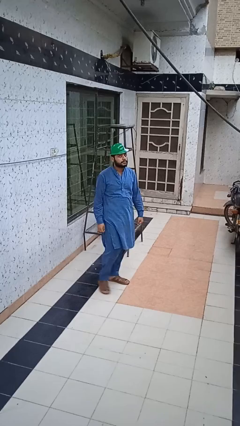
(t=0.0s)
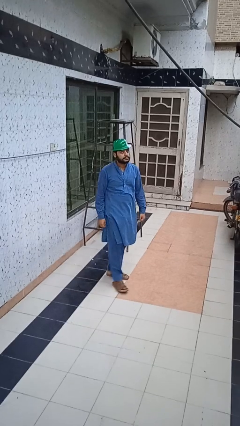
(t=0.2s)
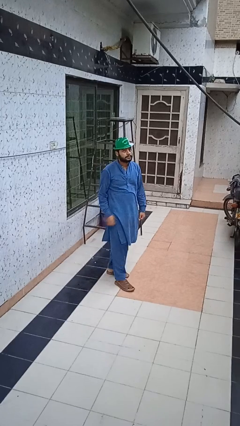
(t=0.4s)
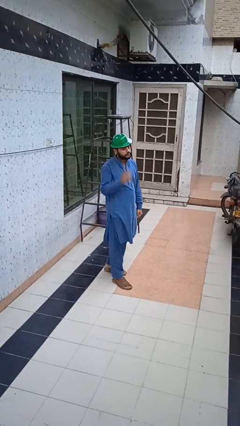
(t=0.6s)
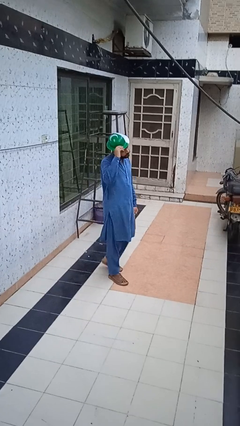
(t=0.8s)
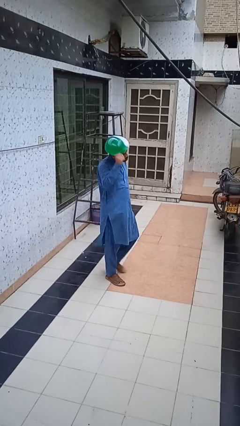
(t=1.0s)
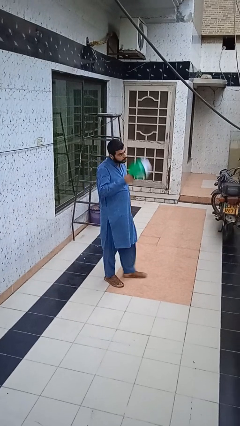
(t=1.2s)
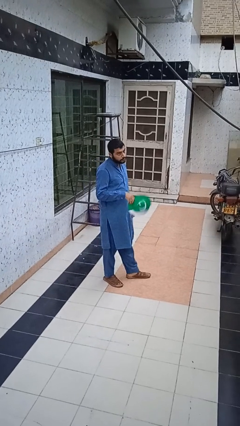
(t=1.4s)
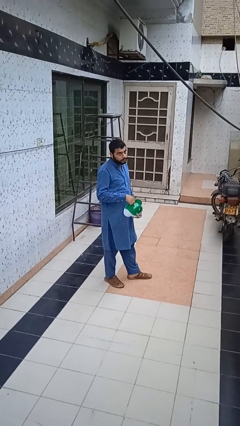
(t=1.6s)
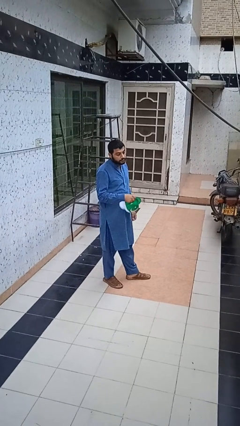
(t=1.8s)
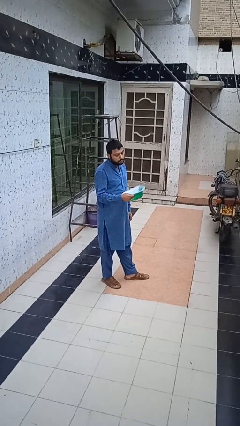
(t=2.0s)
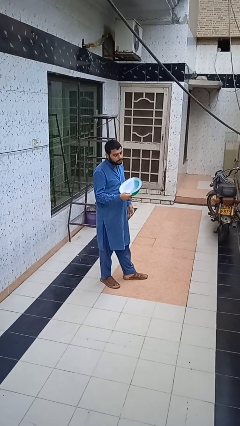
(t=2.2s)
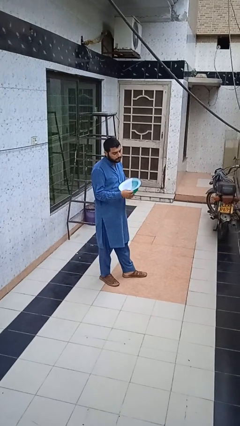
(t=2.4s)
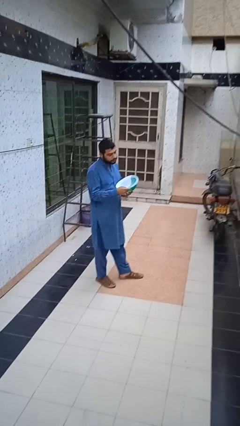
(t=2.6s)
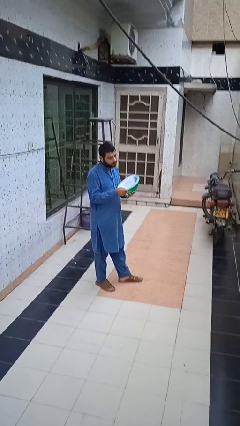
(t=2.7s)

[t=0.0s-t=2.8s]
person takes off hat

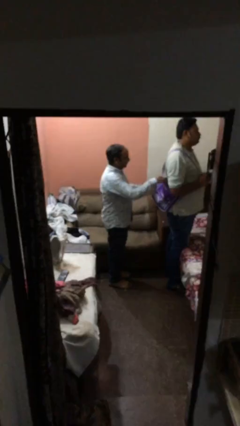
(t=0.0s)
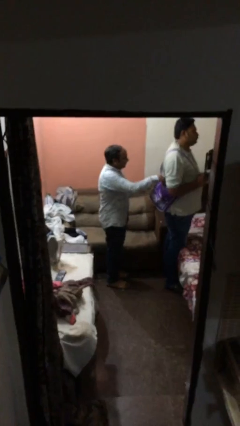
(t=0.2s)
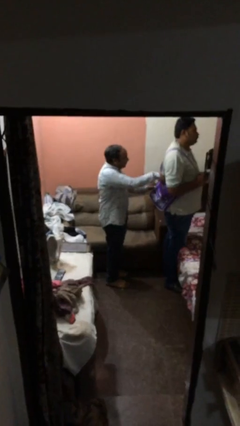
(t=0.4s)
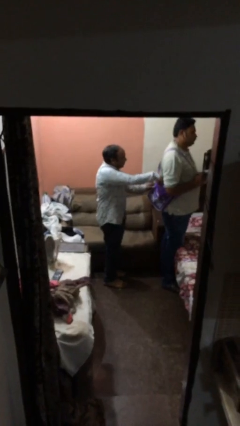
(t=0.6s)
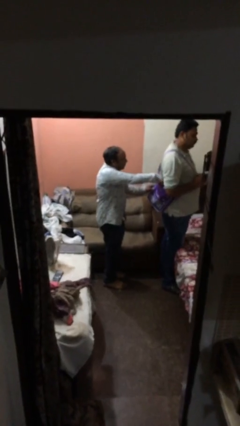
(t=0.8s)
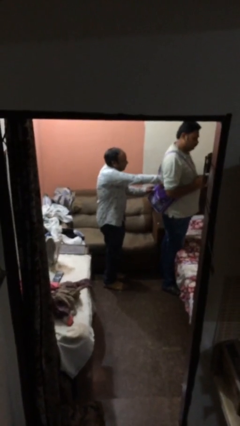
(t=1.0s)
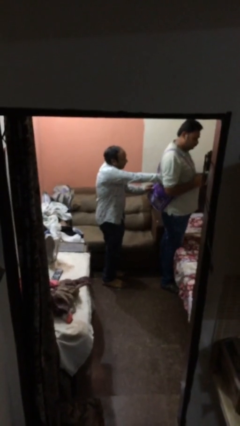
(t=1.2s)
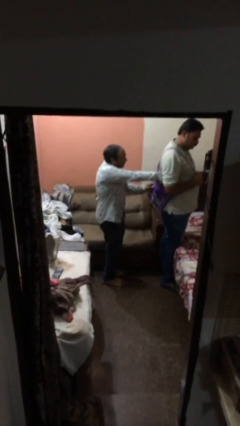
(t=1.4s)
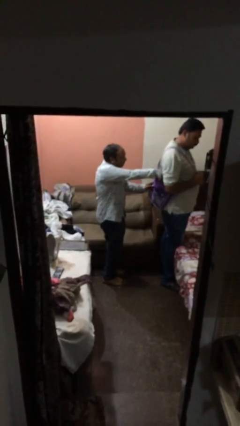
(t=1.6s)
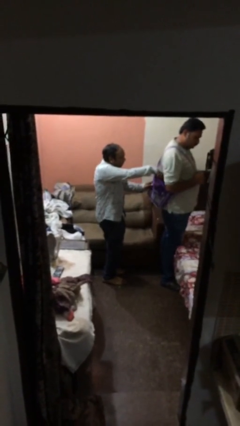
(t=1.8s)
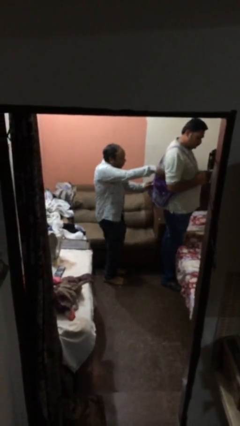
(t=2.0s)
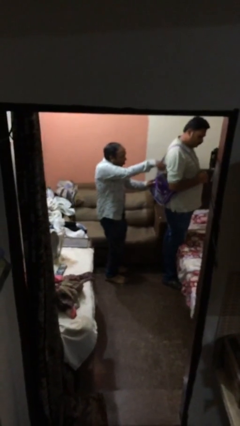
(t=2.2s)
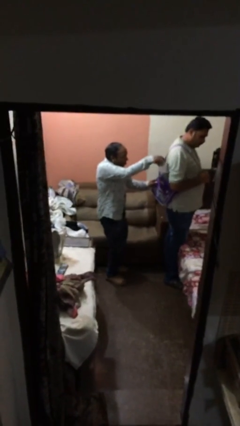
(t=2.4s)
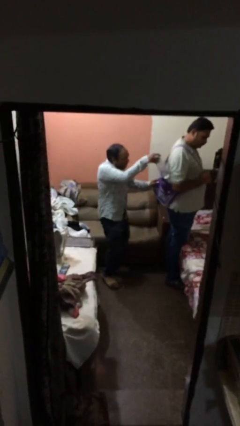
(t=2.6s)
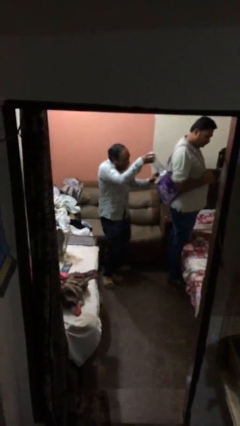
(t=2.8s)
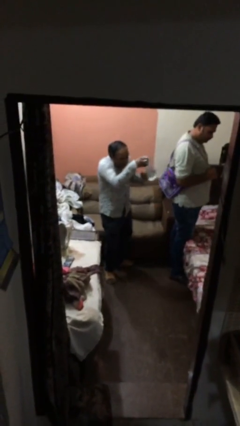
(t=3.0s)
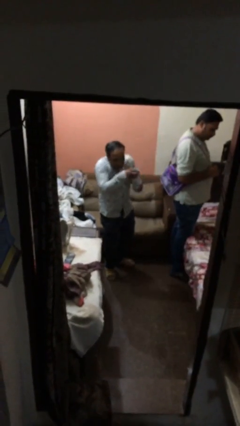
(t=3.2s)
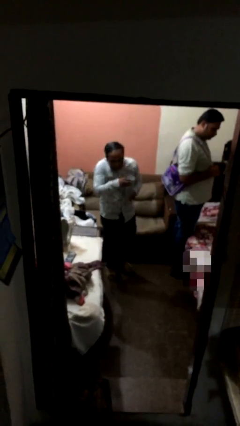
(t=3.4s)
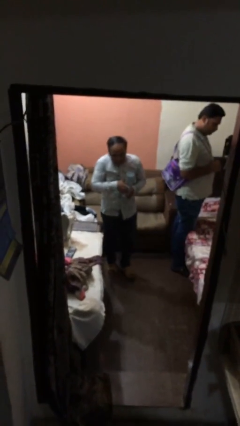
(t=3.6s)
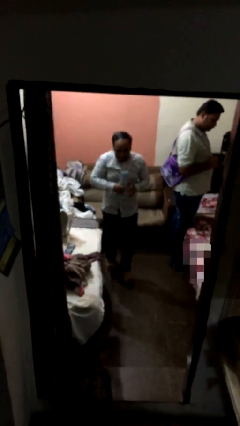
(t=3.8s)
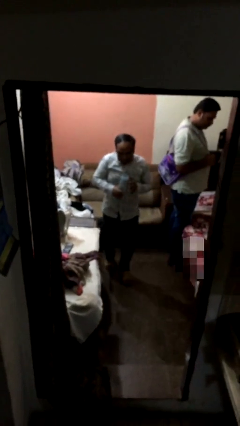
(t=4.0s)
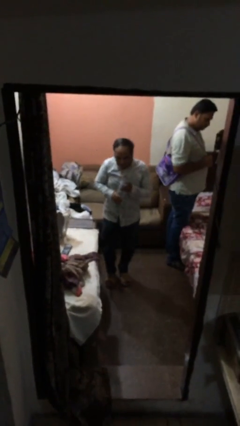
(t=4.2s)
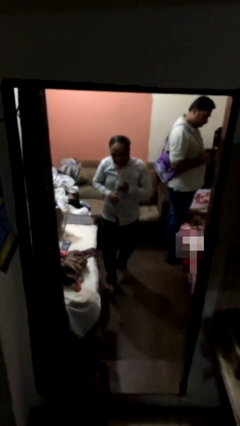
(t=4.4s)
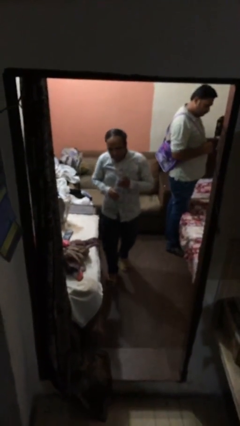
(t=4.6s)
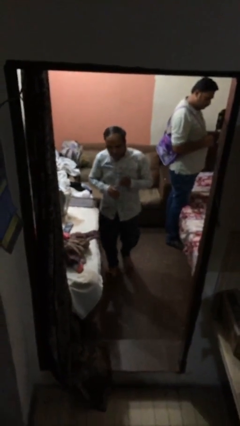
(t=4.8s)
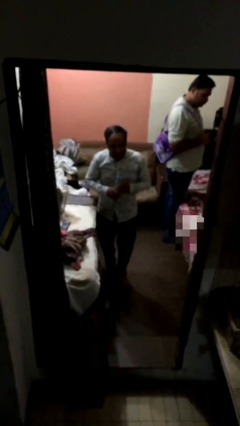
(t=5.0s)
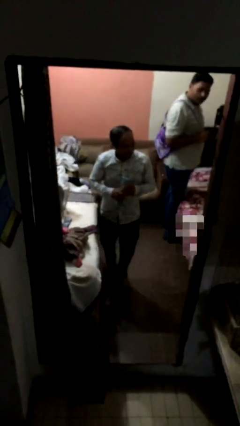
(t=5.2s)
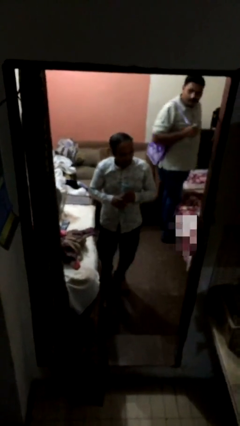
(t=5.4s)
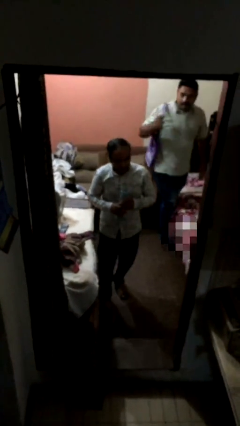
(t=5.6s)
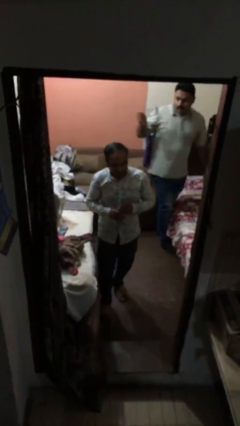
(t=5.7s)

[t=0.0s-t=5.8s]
person steals object from person

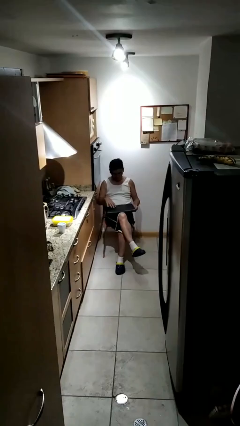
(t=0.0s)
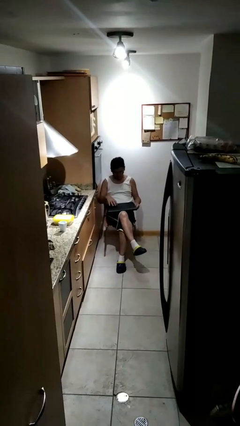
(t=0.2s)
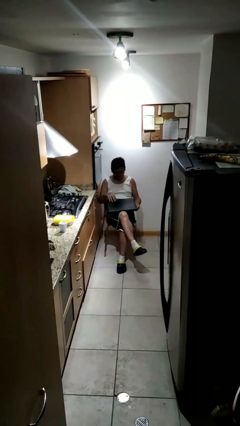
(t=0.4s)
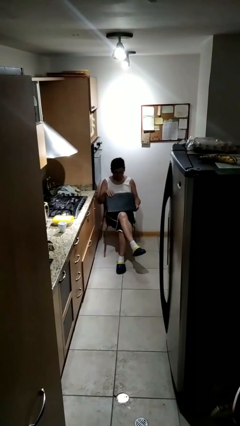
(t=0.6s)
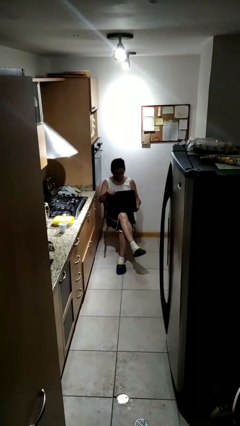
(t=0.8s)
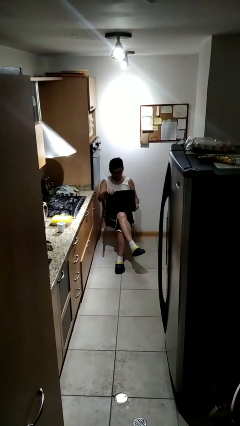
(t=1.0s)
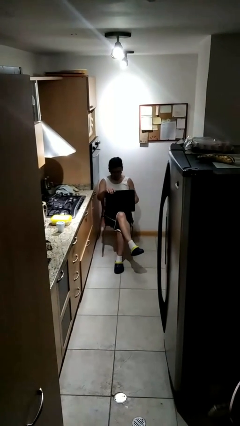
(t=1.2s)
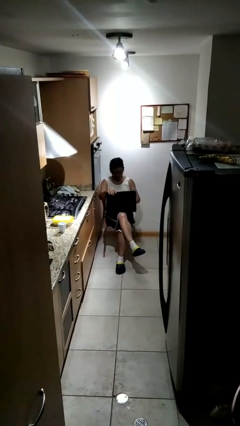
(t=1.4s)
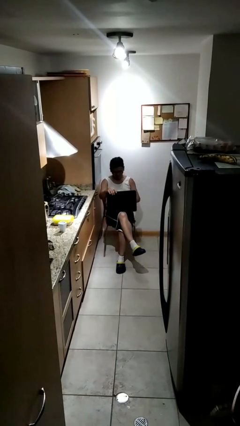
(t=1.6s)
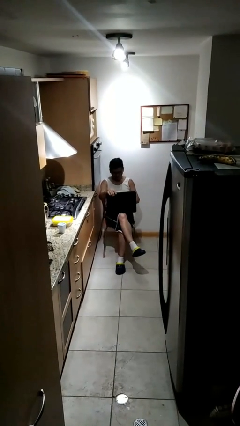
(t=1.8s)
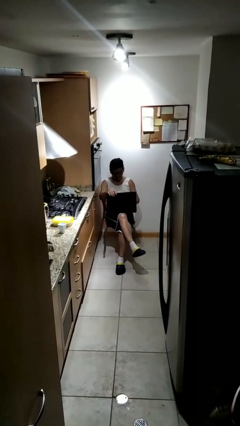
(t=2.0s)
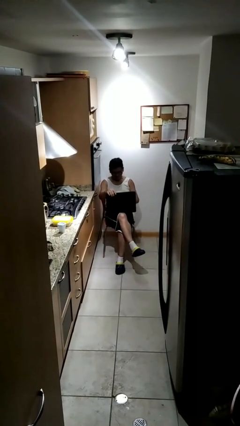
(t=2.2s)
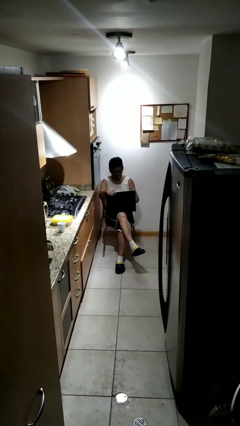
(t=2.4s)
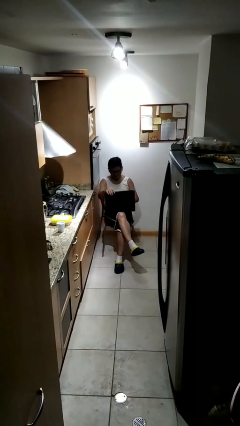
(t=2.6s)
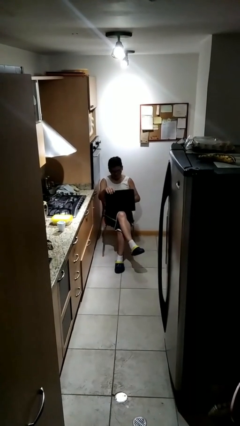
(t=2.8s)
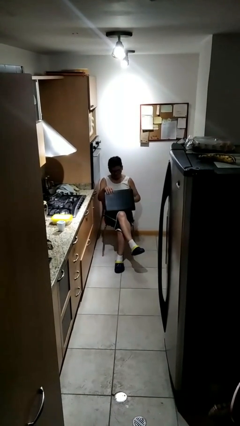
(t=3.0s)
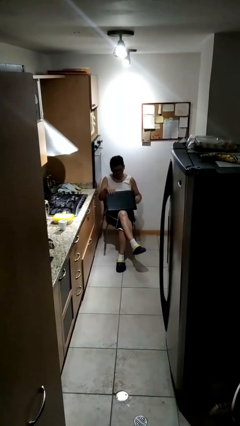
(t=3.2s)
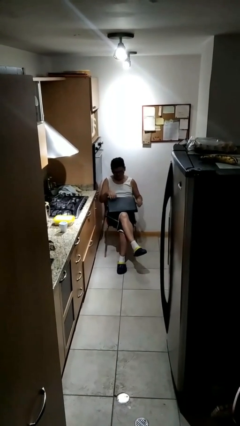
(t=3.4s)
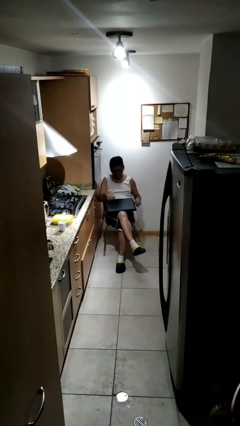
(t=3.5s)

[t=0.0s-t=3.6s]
person interacts with laptop

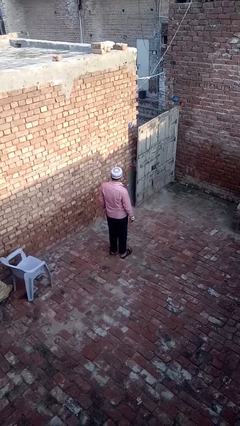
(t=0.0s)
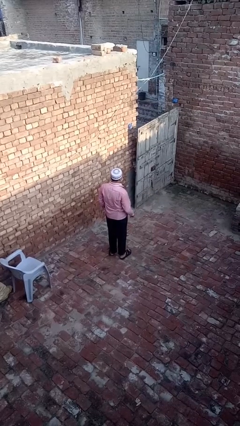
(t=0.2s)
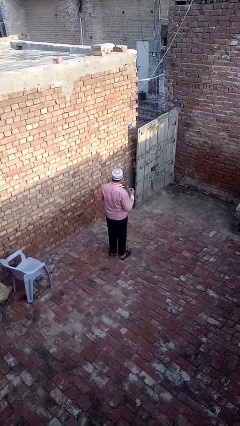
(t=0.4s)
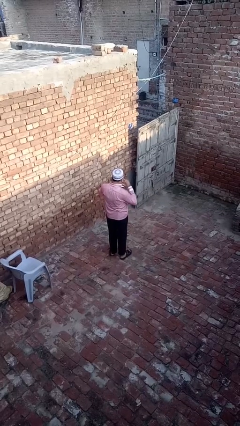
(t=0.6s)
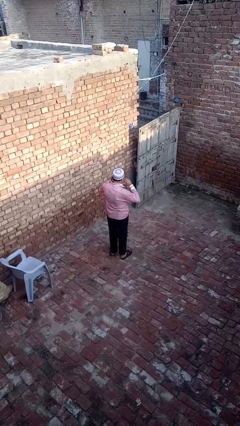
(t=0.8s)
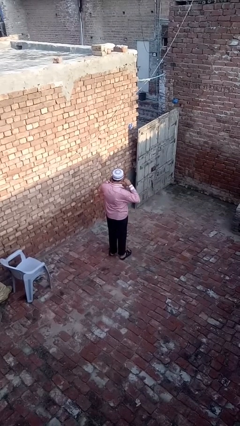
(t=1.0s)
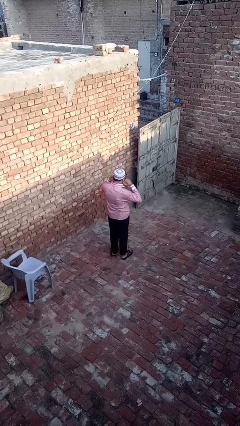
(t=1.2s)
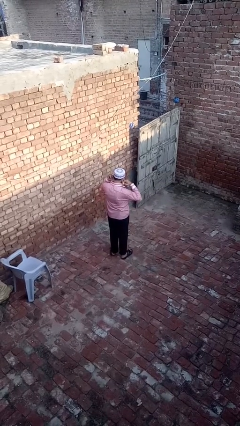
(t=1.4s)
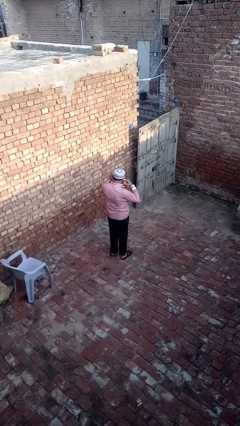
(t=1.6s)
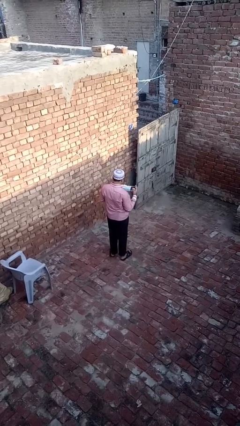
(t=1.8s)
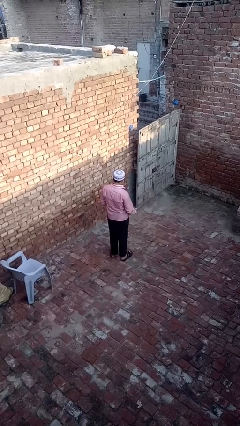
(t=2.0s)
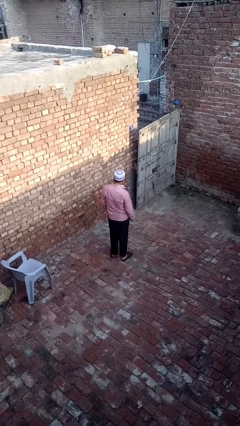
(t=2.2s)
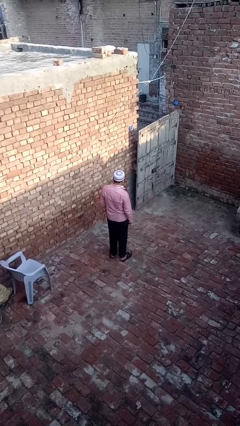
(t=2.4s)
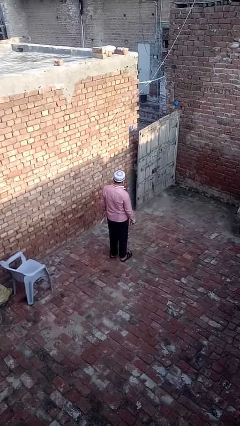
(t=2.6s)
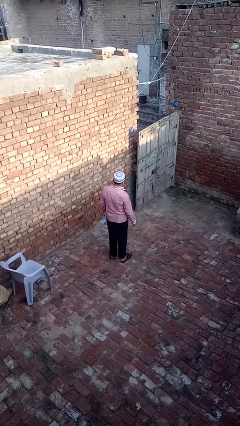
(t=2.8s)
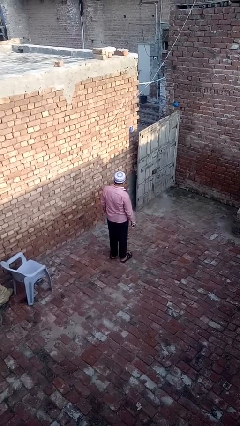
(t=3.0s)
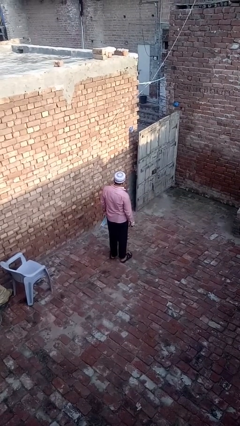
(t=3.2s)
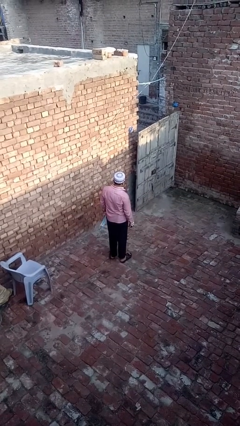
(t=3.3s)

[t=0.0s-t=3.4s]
person takes off facemask

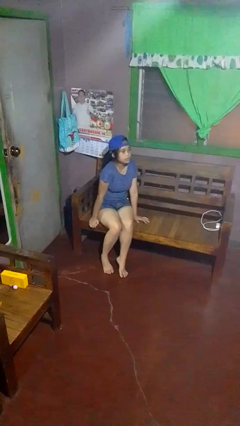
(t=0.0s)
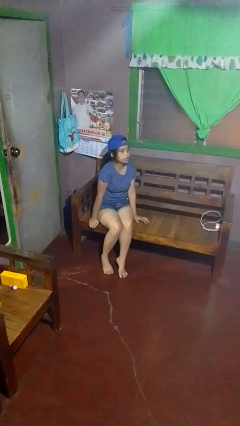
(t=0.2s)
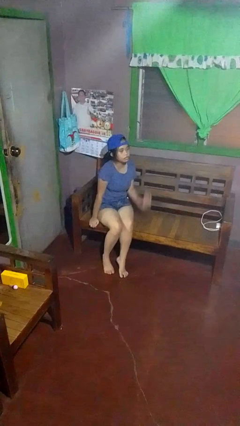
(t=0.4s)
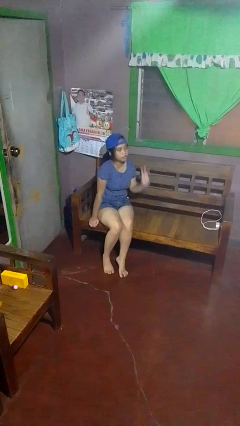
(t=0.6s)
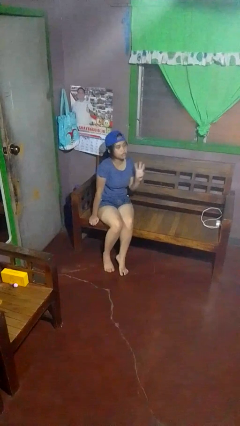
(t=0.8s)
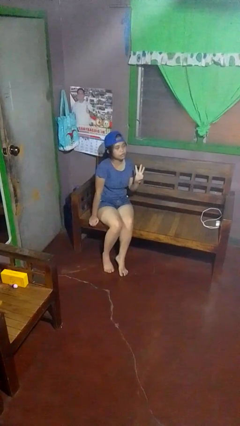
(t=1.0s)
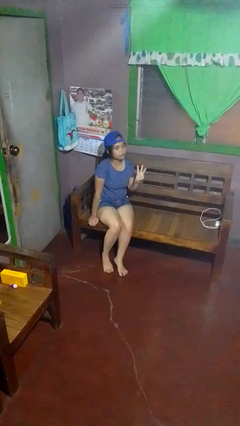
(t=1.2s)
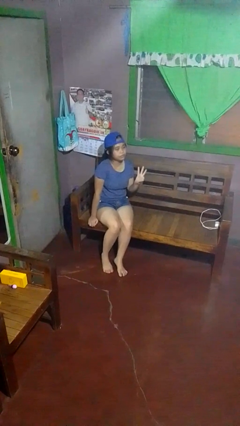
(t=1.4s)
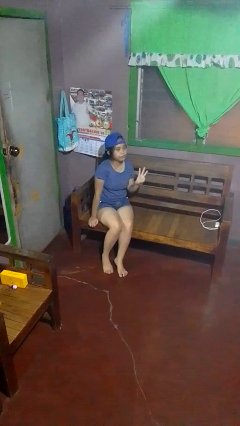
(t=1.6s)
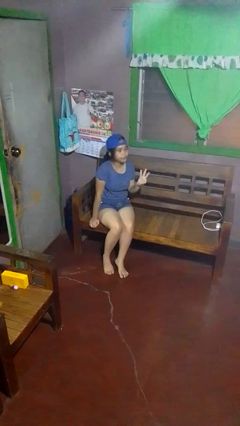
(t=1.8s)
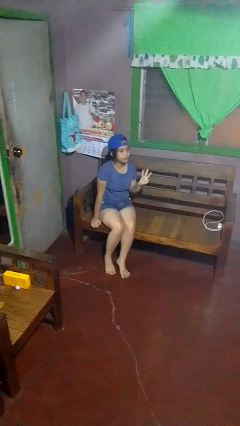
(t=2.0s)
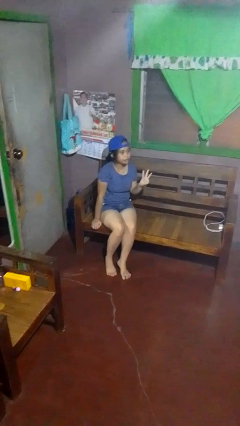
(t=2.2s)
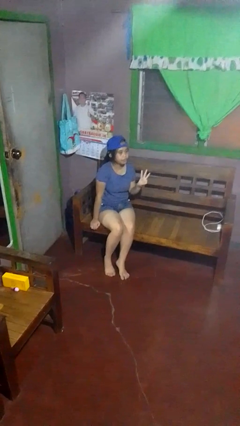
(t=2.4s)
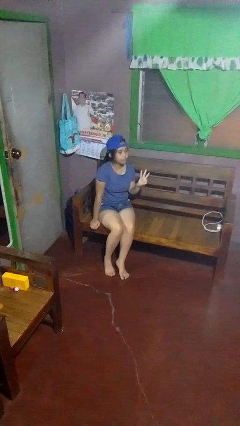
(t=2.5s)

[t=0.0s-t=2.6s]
person gestures number three
